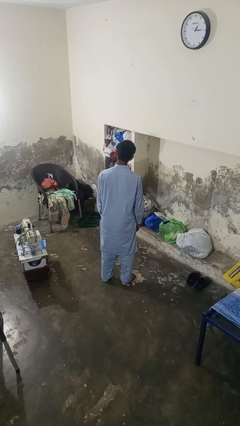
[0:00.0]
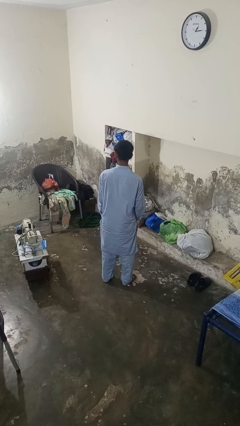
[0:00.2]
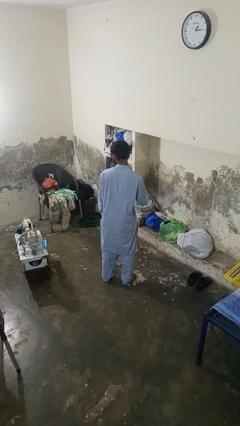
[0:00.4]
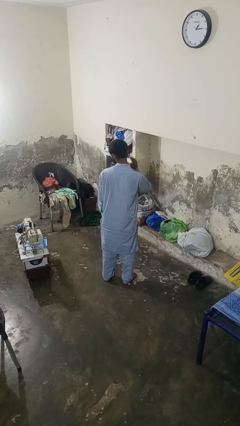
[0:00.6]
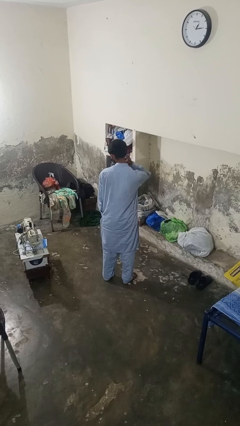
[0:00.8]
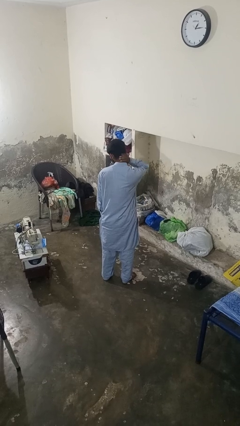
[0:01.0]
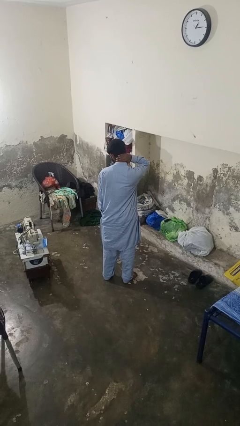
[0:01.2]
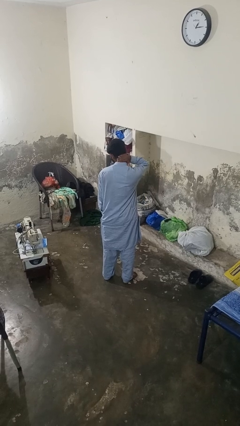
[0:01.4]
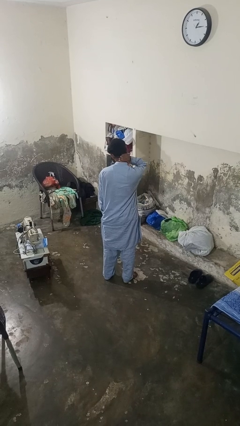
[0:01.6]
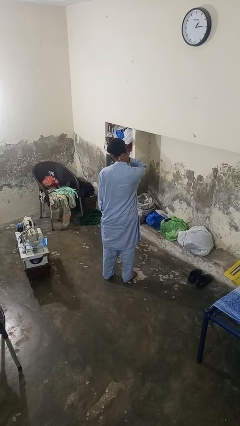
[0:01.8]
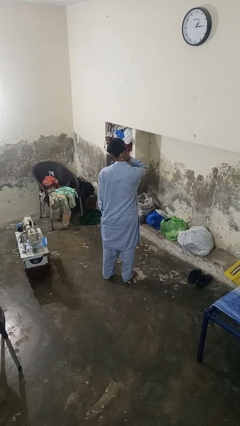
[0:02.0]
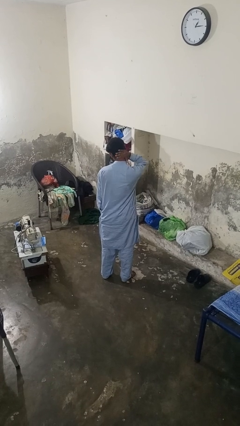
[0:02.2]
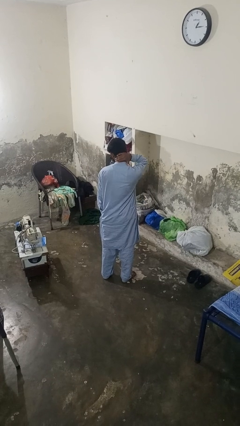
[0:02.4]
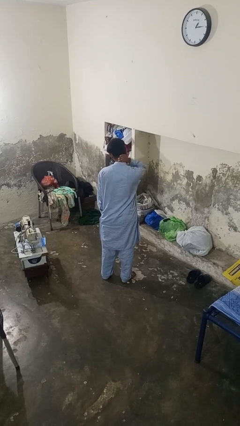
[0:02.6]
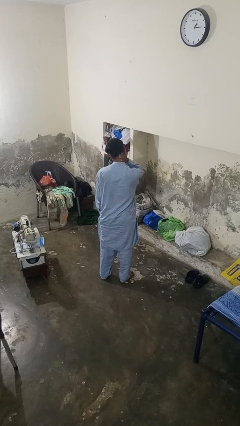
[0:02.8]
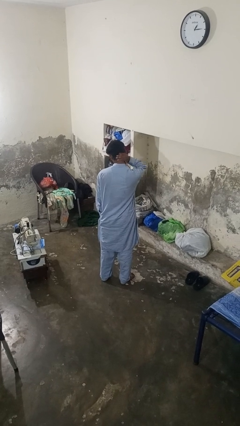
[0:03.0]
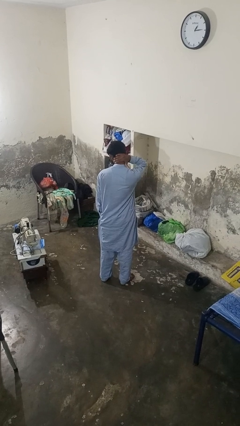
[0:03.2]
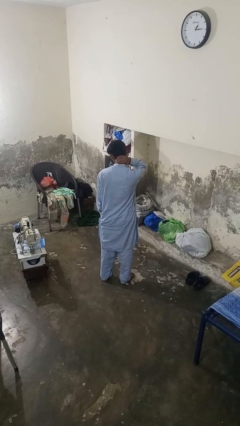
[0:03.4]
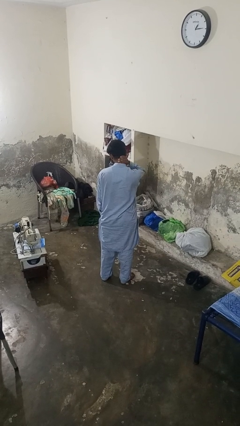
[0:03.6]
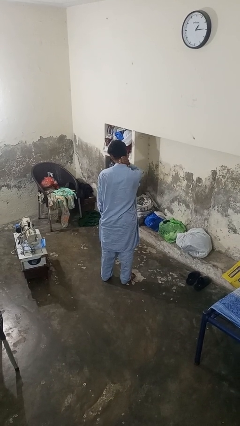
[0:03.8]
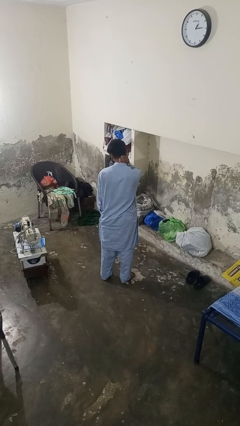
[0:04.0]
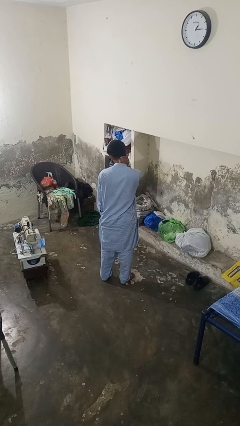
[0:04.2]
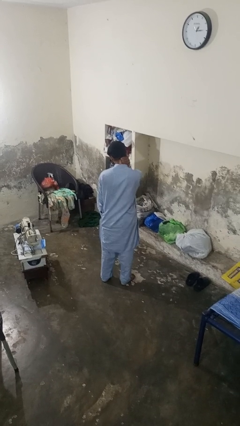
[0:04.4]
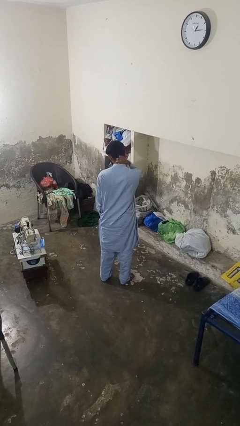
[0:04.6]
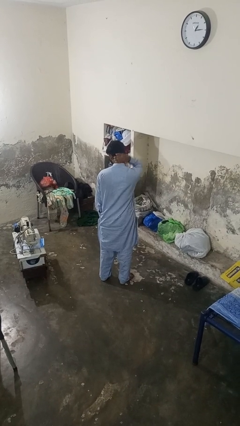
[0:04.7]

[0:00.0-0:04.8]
person rubs neck

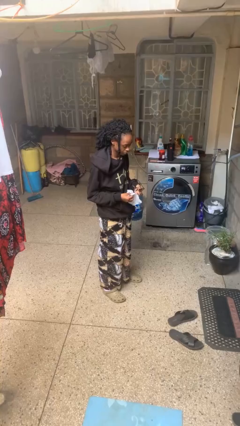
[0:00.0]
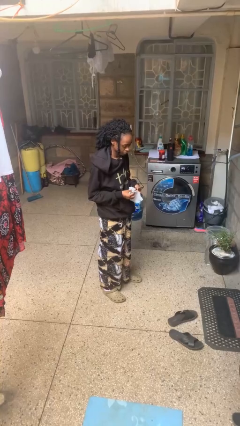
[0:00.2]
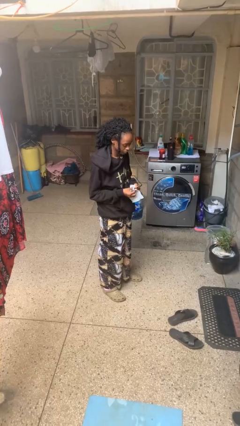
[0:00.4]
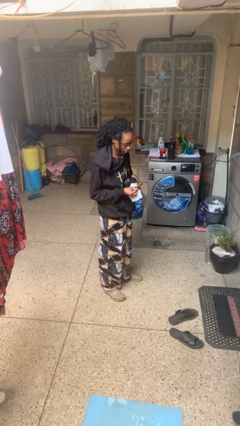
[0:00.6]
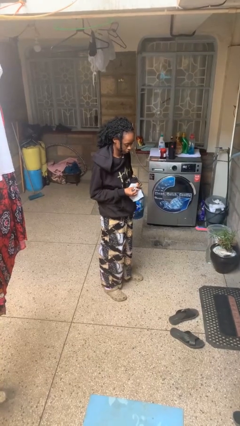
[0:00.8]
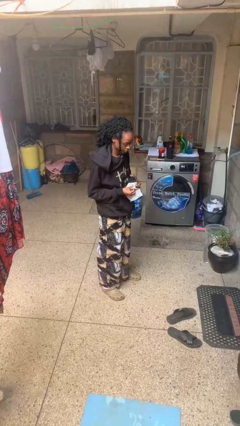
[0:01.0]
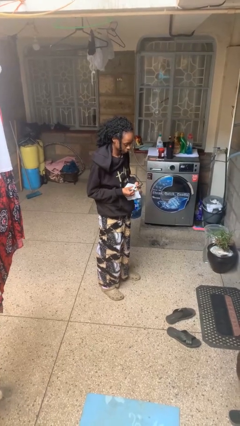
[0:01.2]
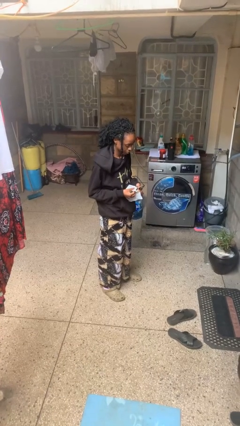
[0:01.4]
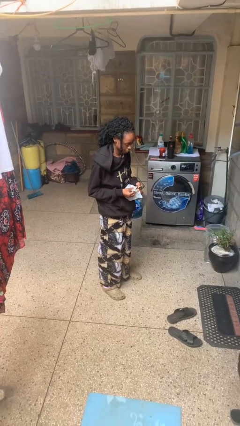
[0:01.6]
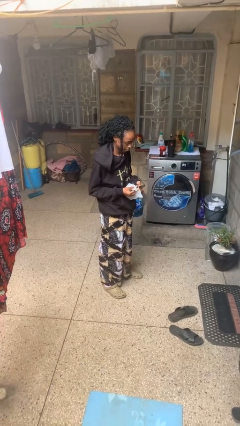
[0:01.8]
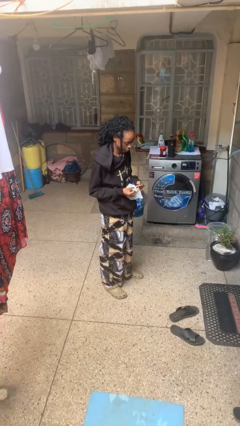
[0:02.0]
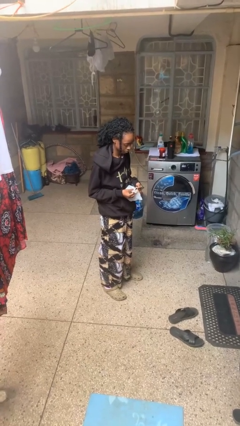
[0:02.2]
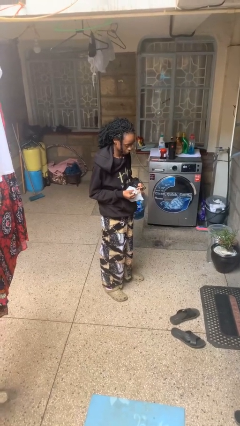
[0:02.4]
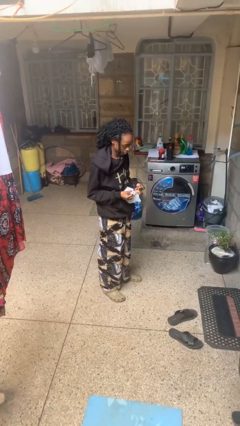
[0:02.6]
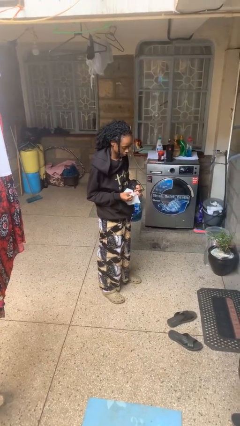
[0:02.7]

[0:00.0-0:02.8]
person cleans eyeglasses

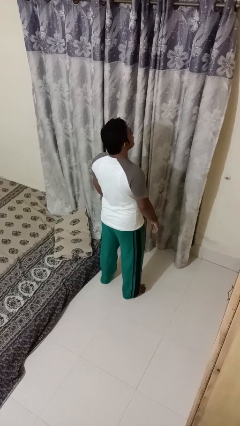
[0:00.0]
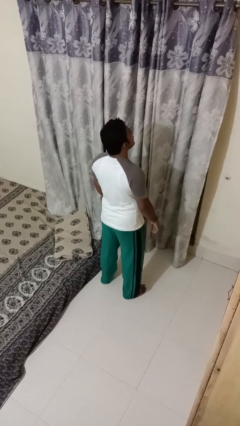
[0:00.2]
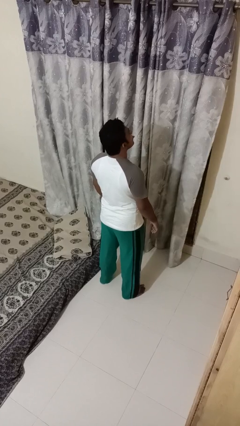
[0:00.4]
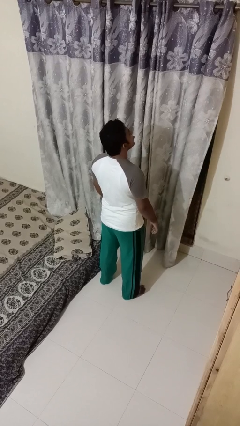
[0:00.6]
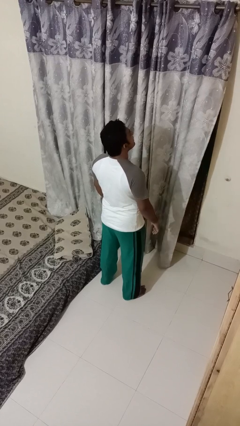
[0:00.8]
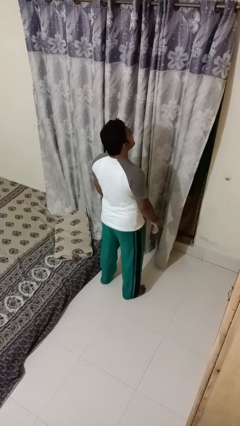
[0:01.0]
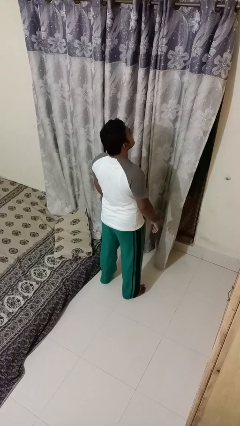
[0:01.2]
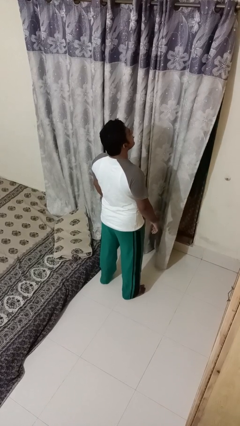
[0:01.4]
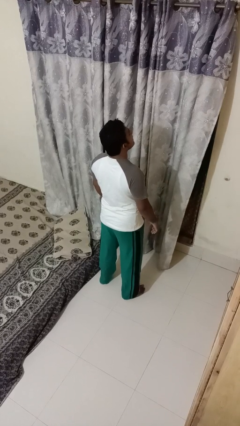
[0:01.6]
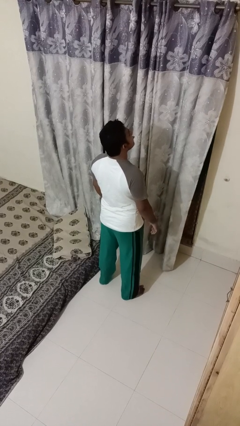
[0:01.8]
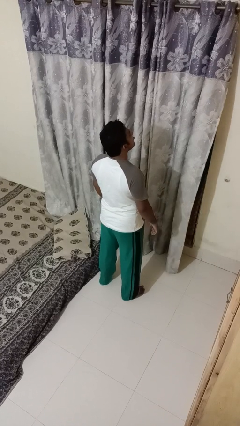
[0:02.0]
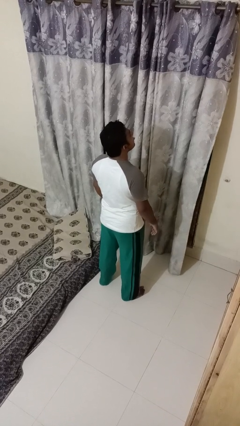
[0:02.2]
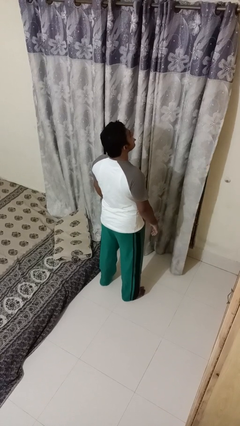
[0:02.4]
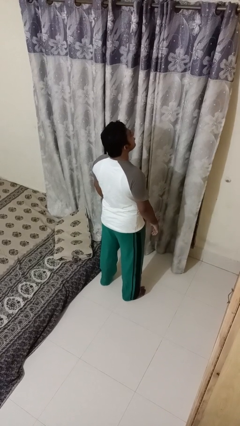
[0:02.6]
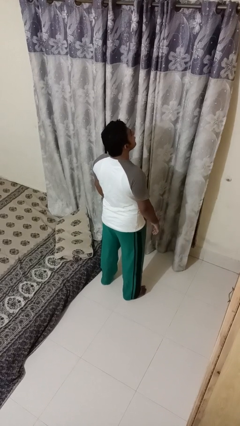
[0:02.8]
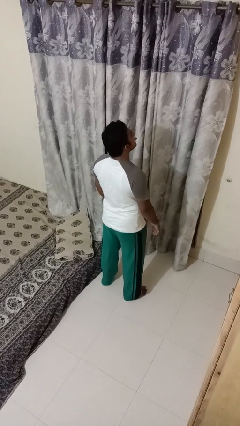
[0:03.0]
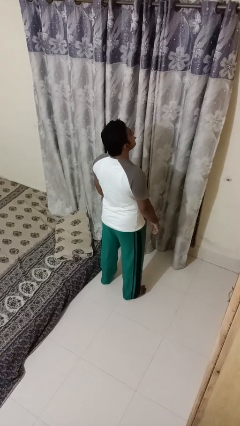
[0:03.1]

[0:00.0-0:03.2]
person sticks out tongue

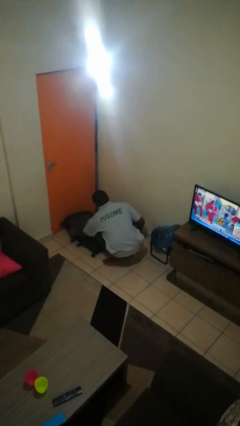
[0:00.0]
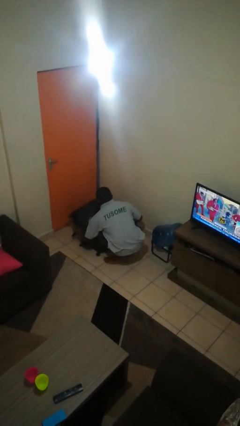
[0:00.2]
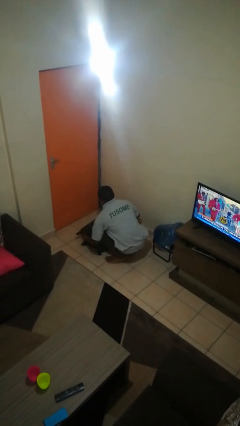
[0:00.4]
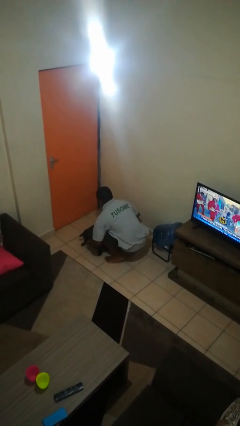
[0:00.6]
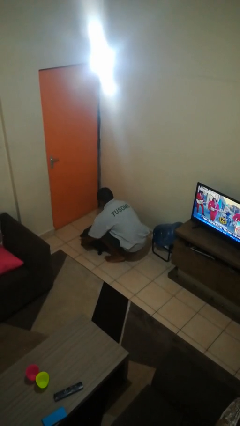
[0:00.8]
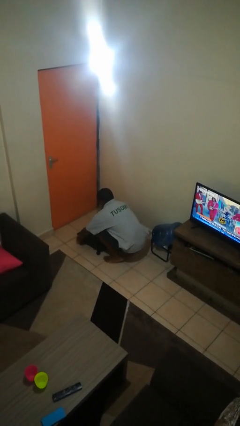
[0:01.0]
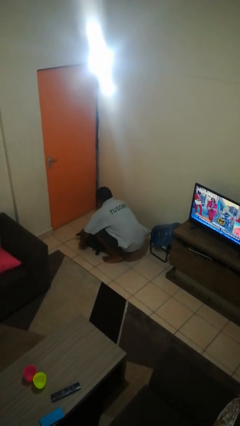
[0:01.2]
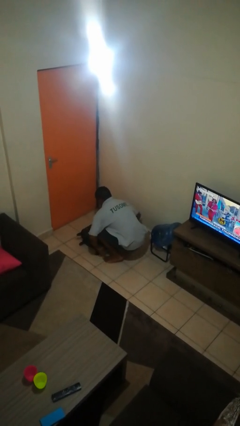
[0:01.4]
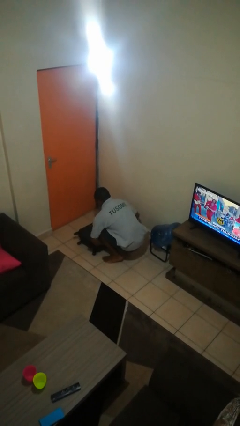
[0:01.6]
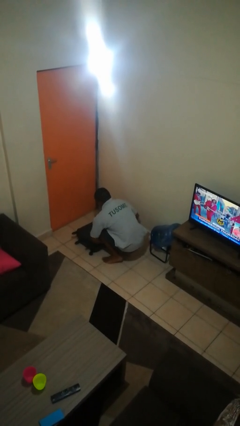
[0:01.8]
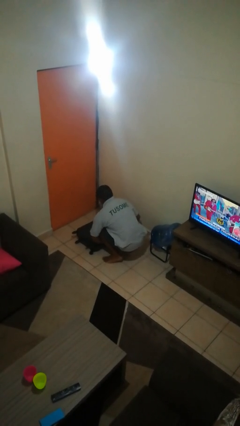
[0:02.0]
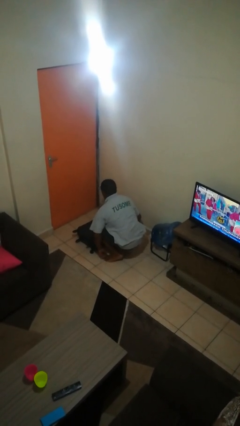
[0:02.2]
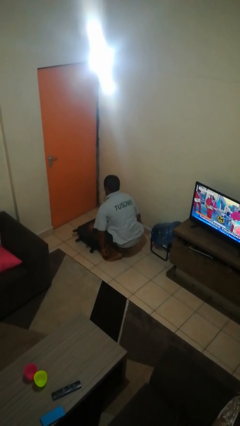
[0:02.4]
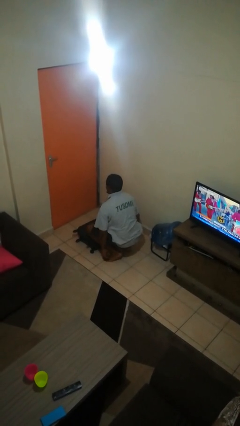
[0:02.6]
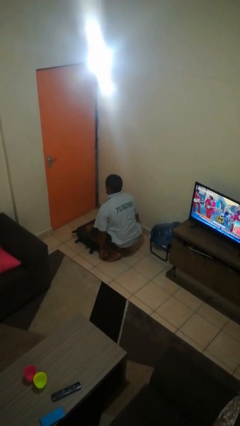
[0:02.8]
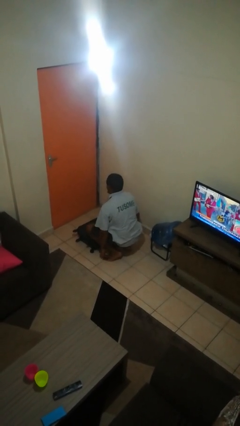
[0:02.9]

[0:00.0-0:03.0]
person closes suitcase

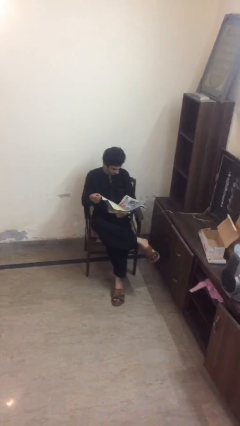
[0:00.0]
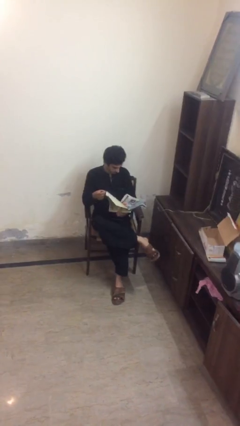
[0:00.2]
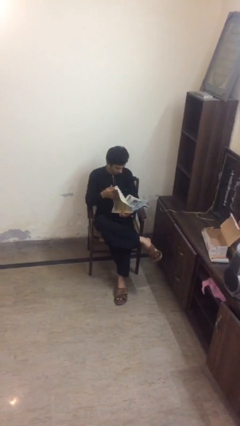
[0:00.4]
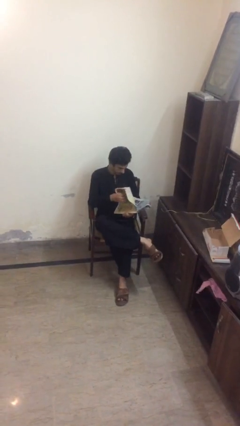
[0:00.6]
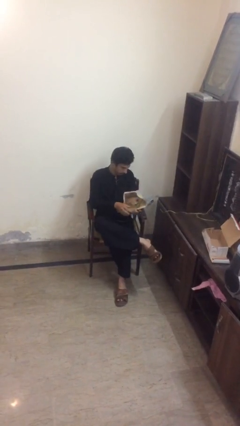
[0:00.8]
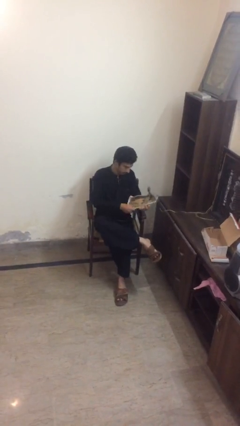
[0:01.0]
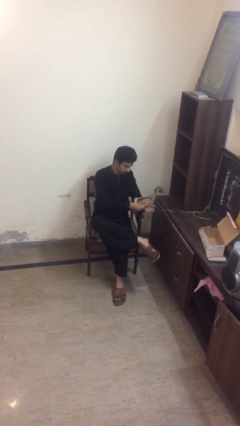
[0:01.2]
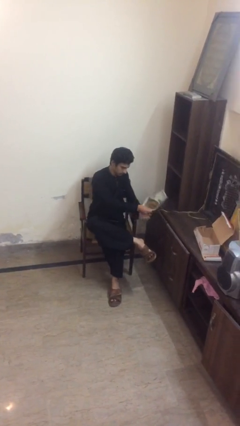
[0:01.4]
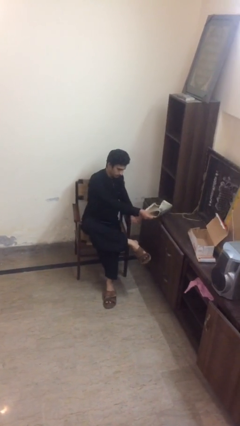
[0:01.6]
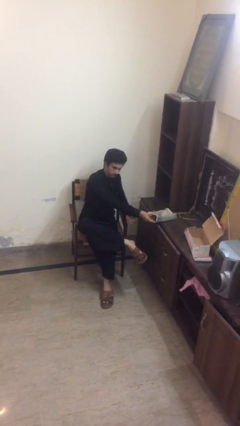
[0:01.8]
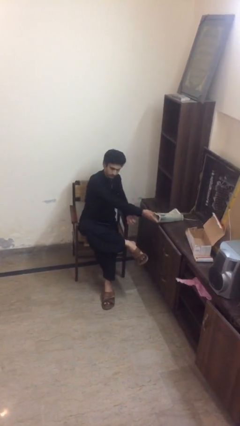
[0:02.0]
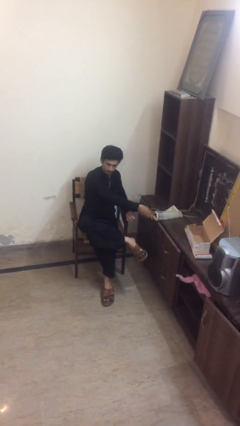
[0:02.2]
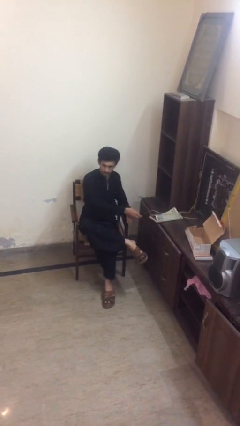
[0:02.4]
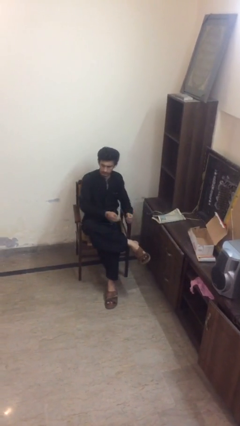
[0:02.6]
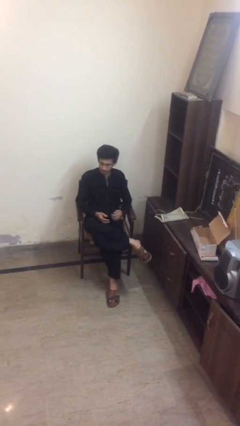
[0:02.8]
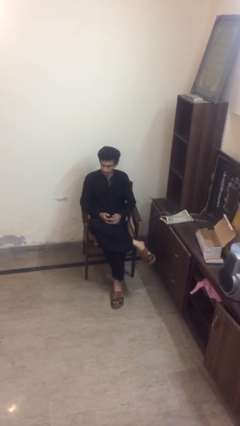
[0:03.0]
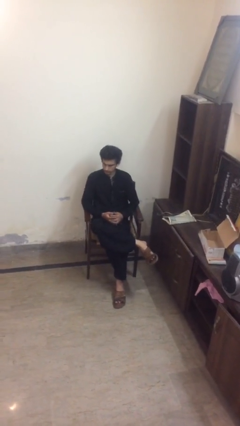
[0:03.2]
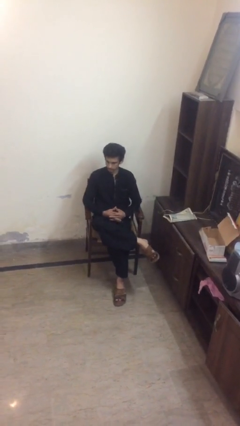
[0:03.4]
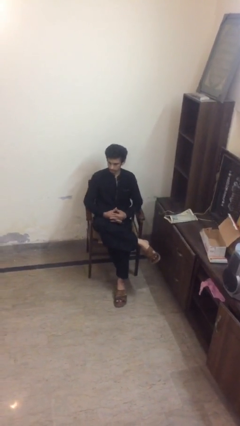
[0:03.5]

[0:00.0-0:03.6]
person puts down object on table

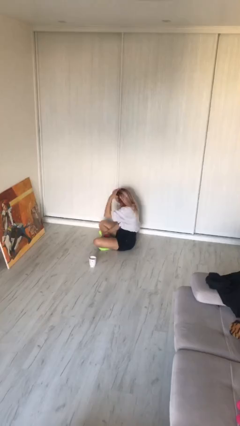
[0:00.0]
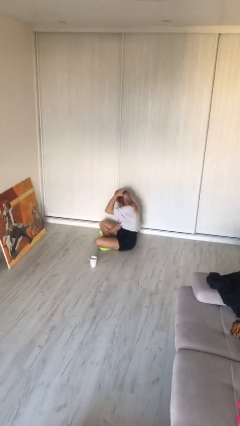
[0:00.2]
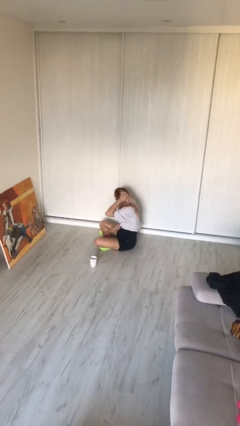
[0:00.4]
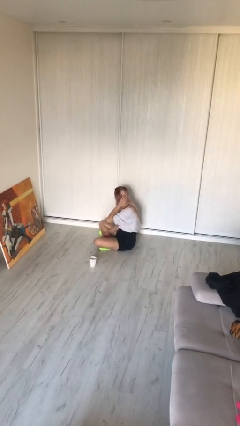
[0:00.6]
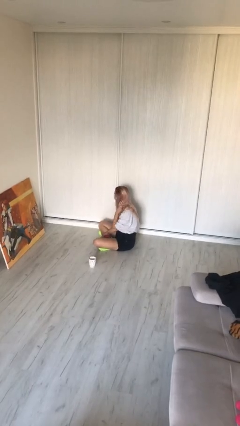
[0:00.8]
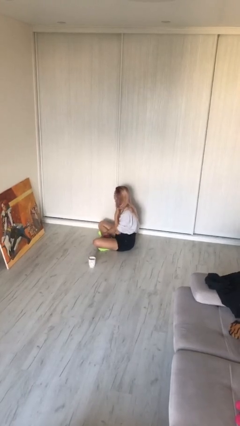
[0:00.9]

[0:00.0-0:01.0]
person strokes hair
